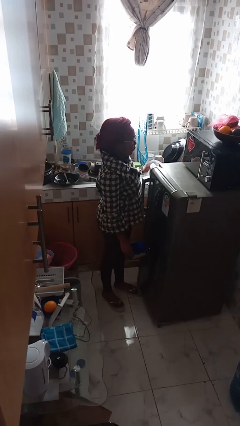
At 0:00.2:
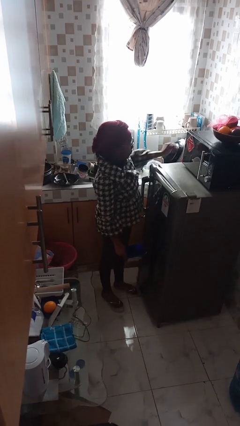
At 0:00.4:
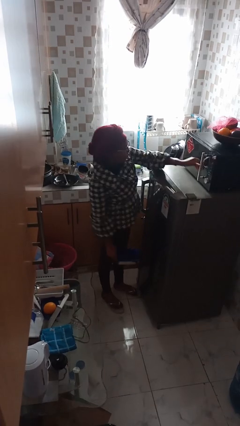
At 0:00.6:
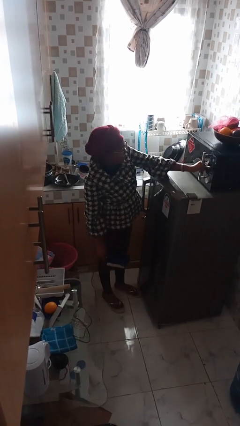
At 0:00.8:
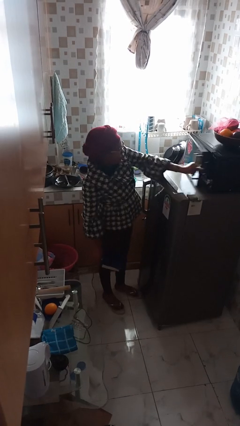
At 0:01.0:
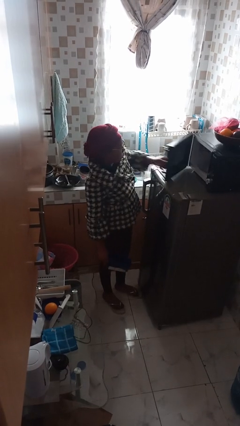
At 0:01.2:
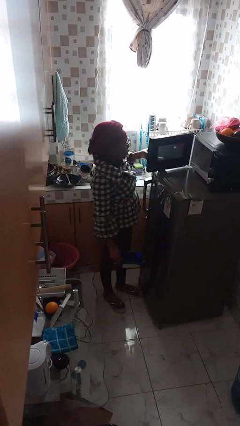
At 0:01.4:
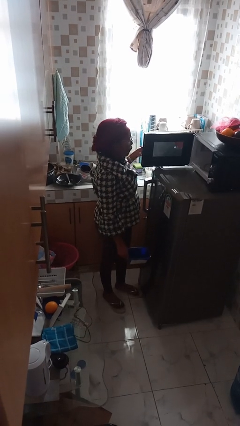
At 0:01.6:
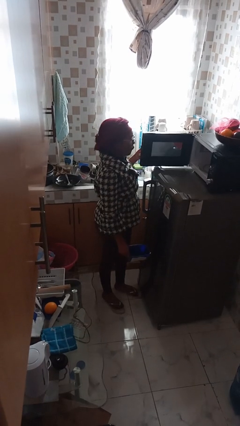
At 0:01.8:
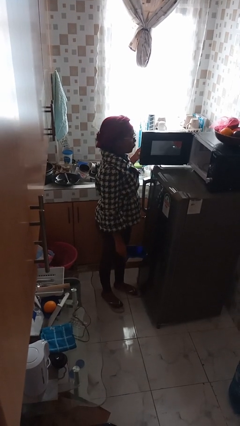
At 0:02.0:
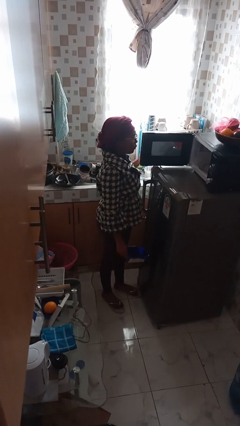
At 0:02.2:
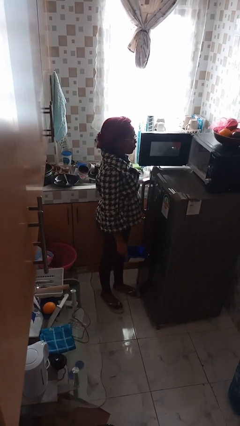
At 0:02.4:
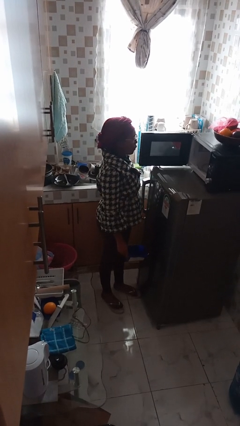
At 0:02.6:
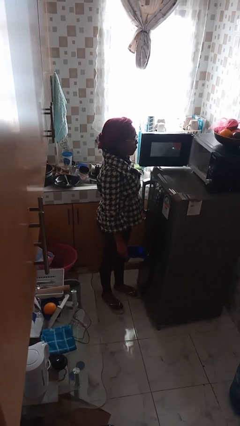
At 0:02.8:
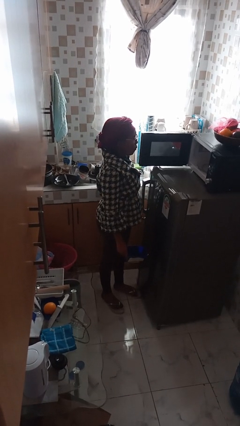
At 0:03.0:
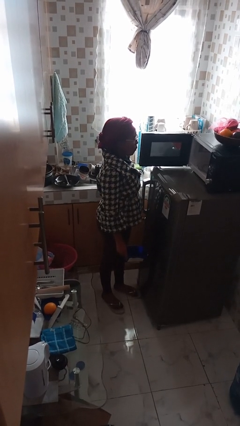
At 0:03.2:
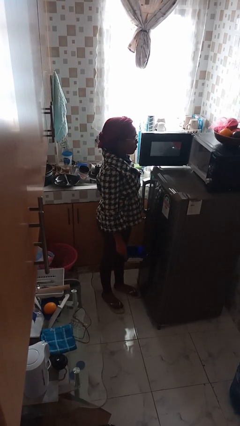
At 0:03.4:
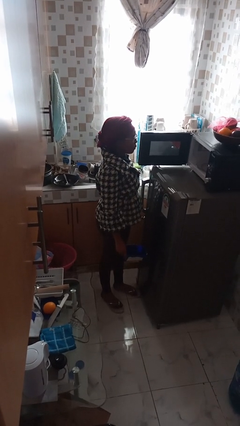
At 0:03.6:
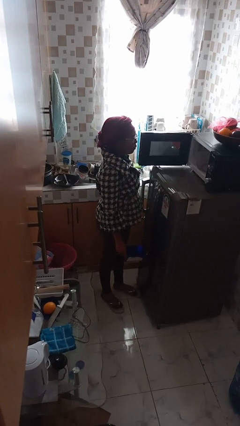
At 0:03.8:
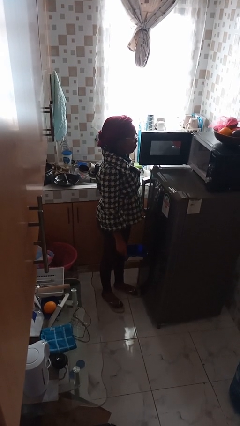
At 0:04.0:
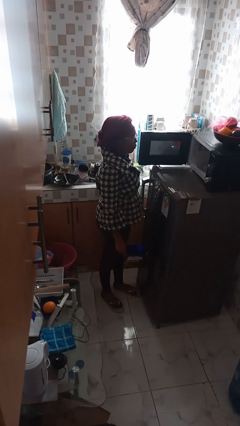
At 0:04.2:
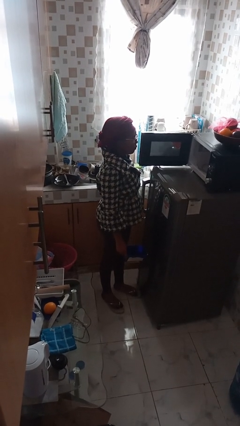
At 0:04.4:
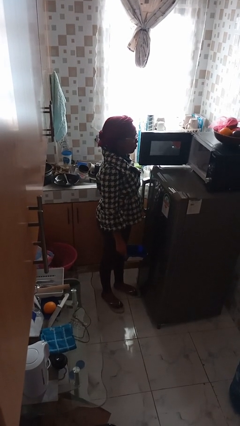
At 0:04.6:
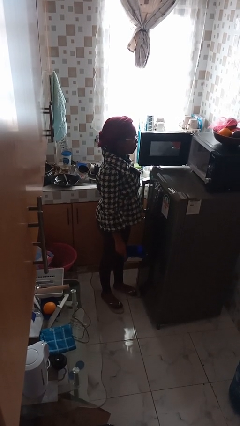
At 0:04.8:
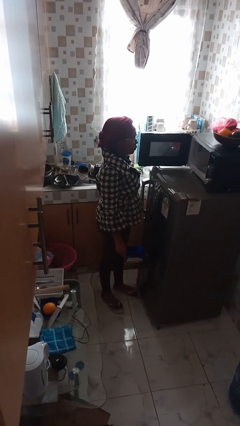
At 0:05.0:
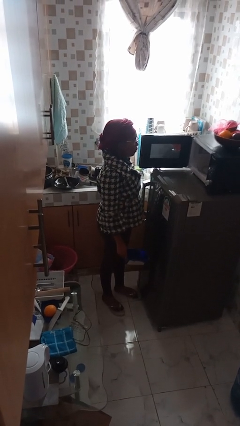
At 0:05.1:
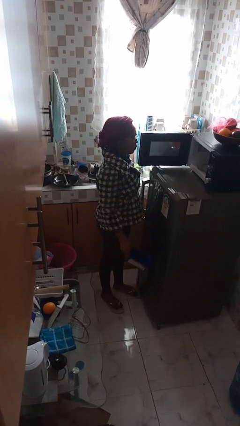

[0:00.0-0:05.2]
person opens microwave

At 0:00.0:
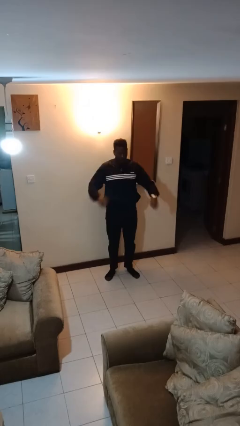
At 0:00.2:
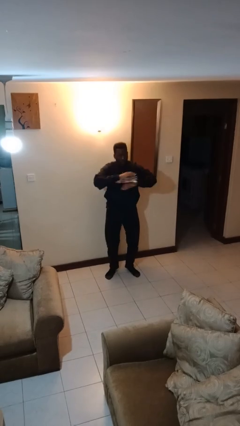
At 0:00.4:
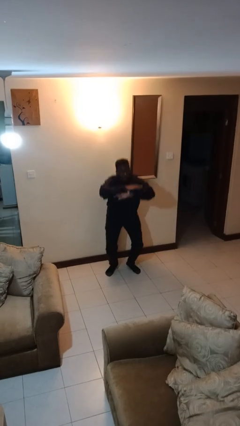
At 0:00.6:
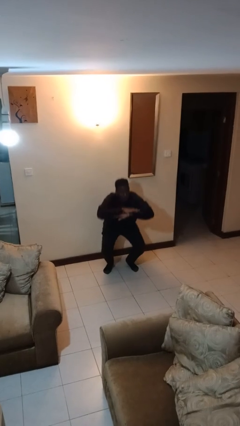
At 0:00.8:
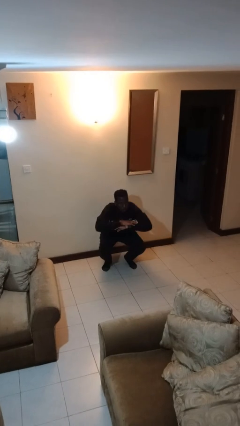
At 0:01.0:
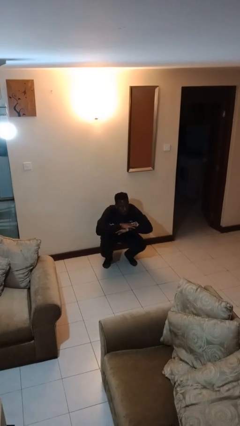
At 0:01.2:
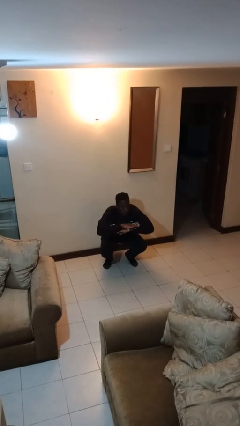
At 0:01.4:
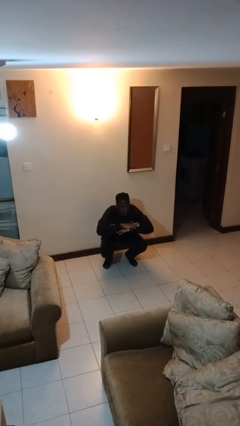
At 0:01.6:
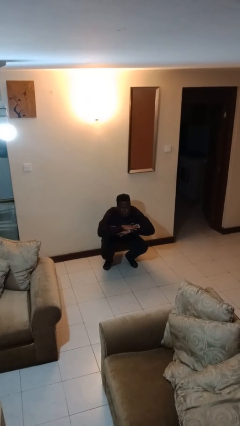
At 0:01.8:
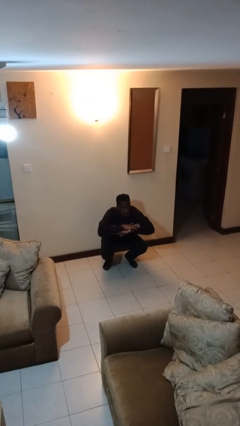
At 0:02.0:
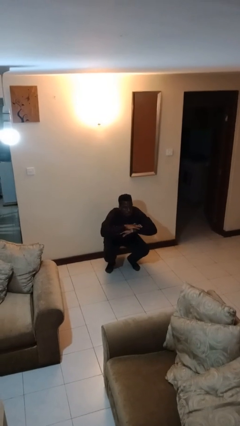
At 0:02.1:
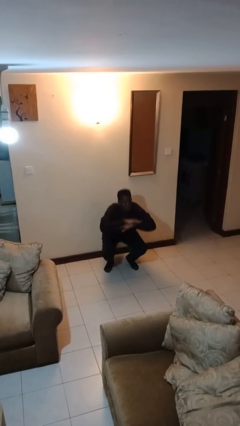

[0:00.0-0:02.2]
person squats

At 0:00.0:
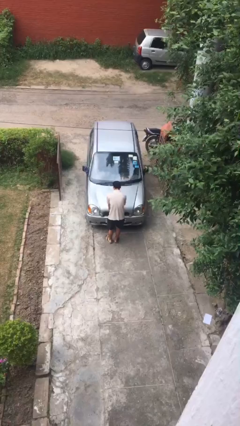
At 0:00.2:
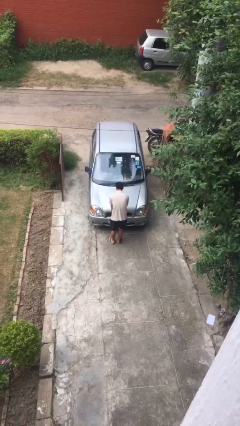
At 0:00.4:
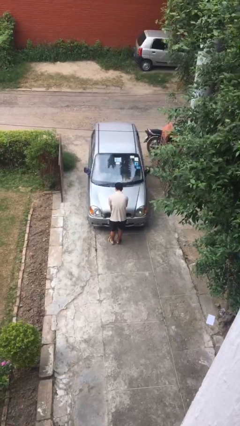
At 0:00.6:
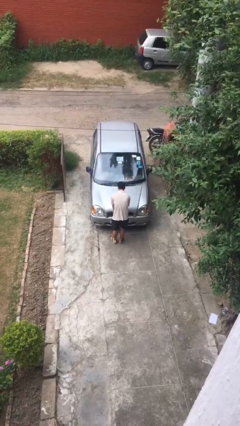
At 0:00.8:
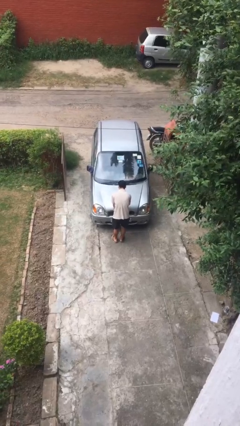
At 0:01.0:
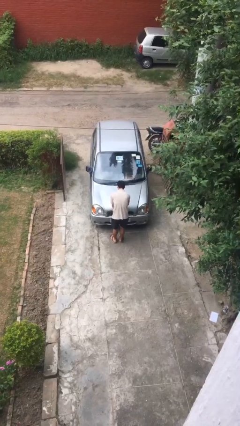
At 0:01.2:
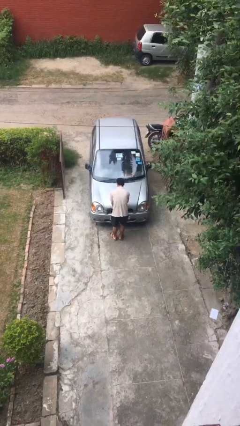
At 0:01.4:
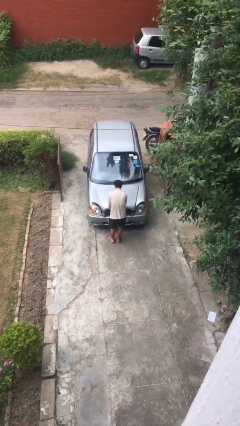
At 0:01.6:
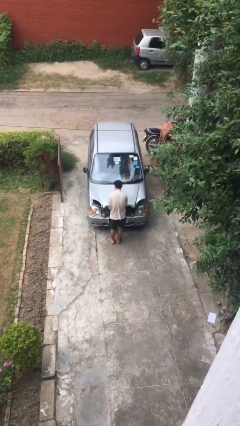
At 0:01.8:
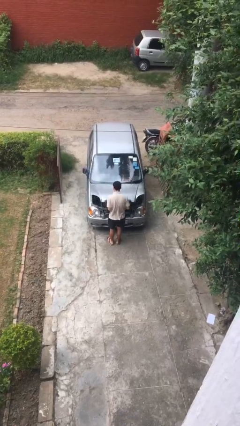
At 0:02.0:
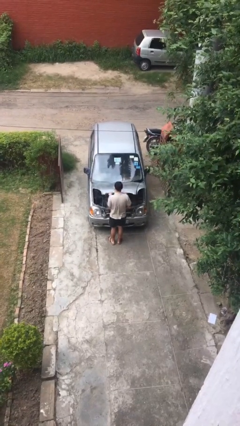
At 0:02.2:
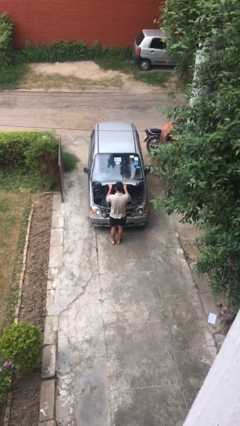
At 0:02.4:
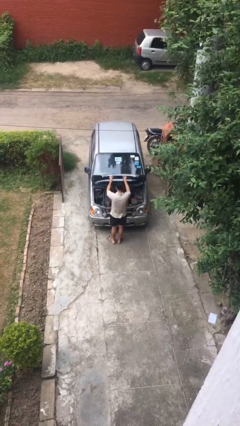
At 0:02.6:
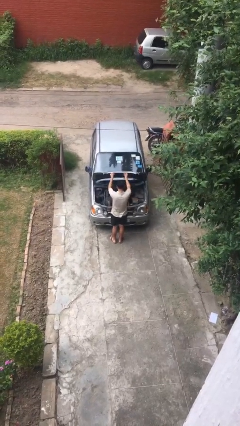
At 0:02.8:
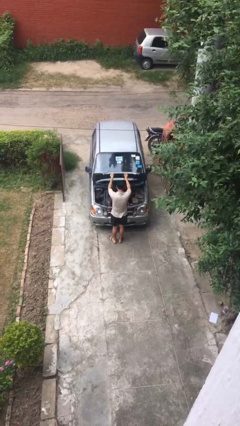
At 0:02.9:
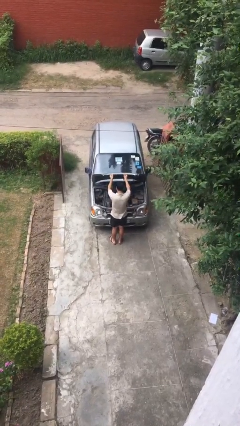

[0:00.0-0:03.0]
person opens car hood

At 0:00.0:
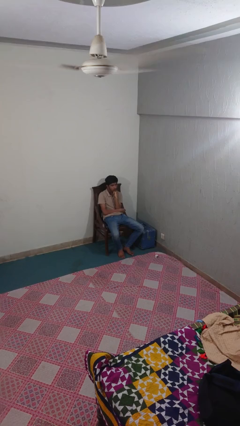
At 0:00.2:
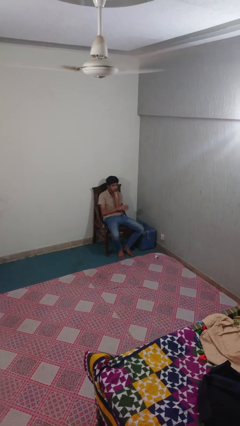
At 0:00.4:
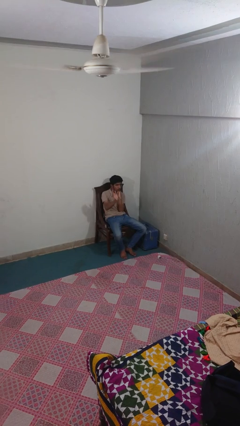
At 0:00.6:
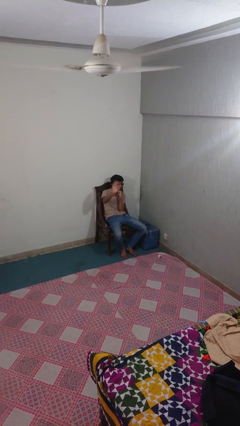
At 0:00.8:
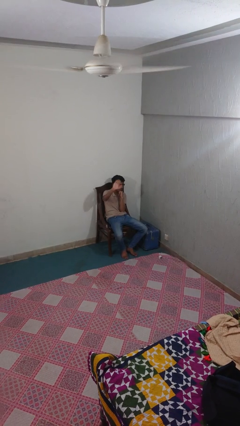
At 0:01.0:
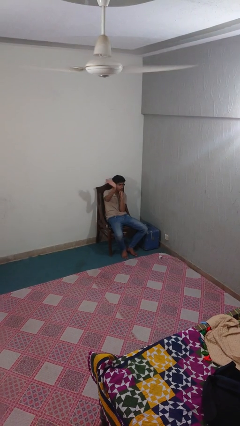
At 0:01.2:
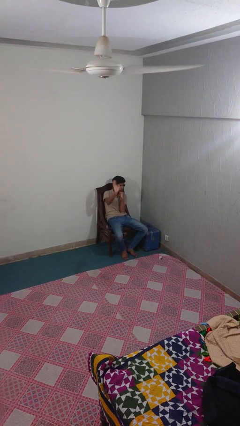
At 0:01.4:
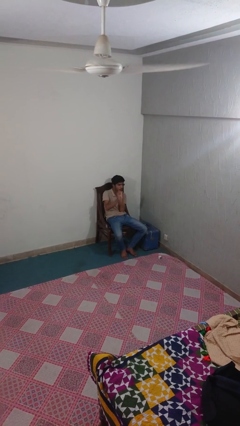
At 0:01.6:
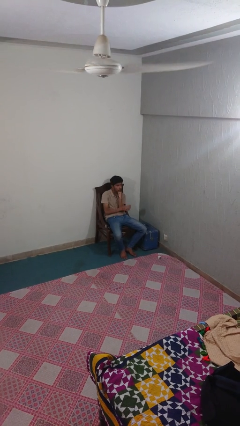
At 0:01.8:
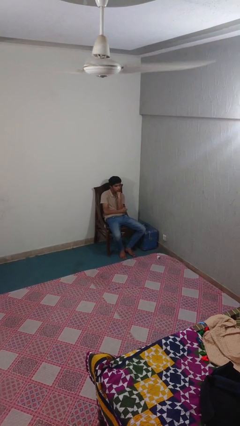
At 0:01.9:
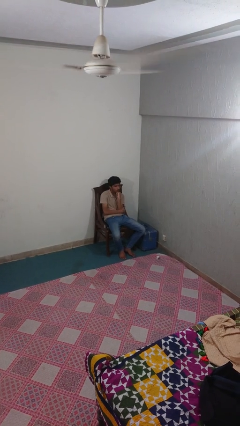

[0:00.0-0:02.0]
person waves at person

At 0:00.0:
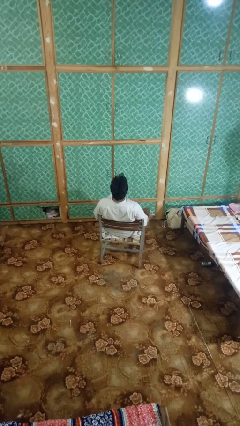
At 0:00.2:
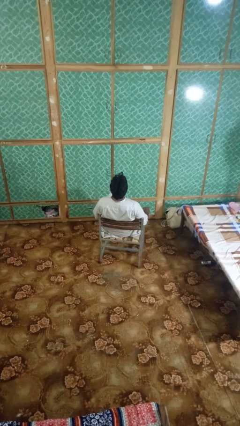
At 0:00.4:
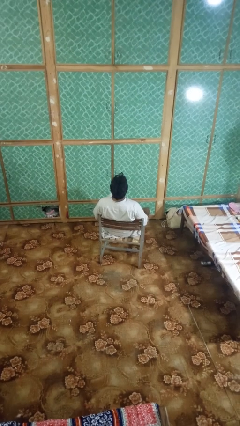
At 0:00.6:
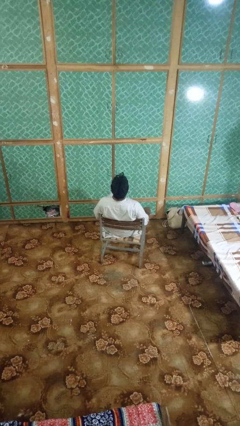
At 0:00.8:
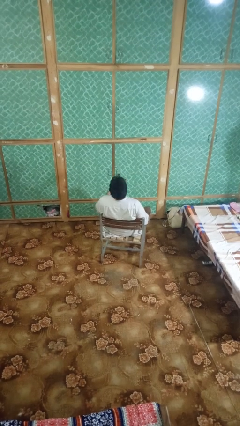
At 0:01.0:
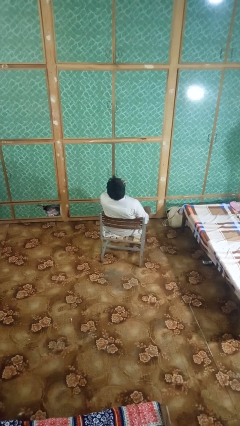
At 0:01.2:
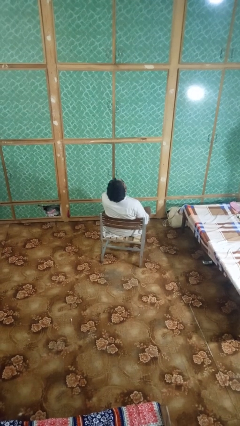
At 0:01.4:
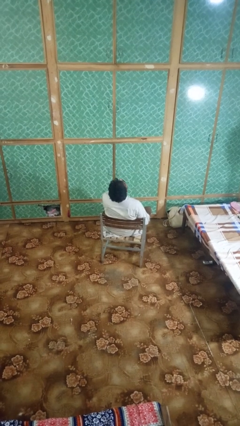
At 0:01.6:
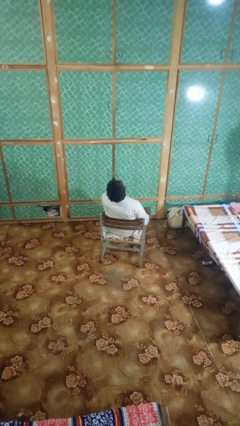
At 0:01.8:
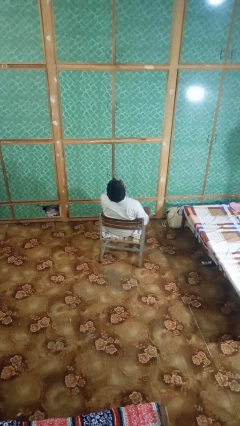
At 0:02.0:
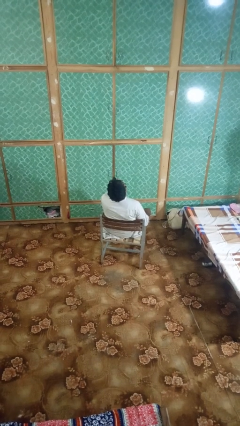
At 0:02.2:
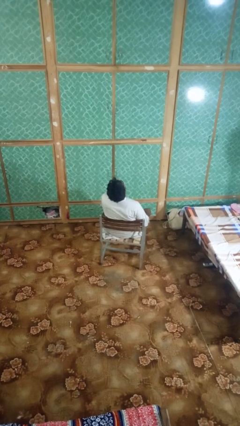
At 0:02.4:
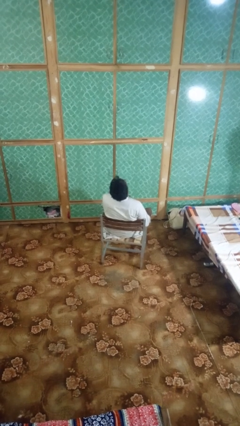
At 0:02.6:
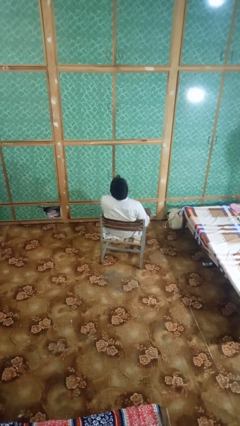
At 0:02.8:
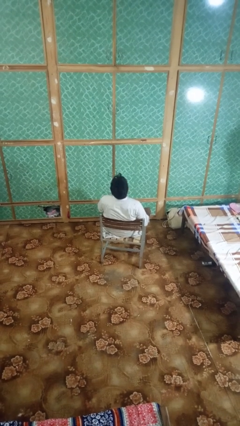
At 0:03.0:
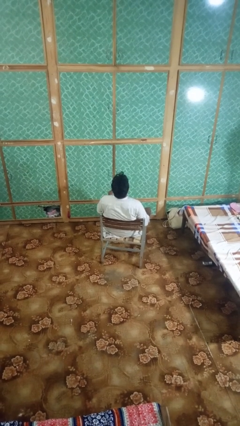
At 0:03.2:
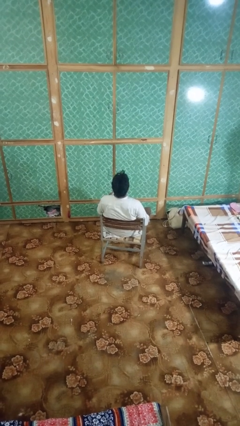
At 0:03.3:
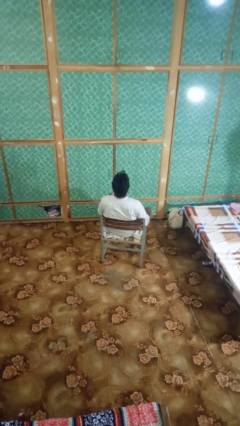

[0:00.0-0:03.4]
person rubs neck

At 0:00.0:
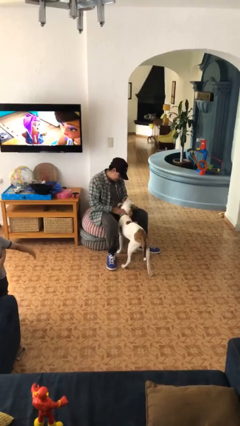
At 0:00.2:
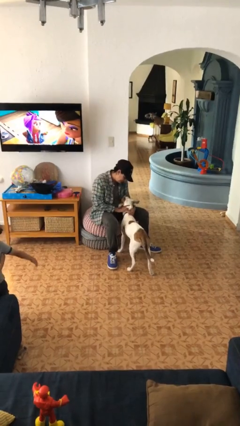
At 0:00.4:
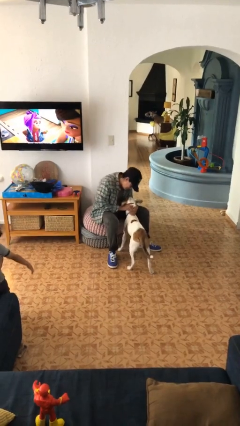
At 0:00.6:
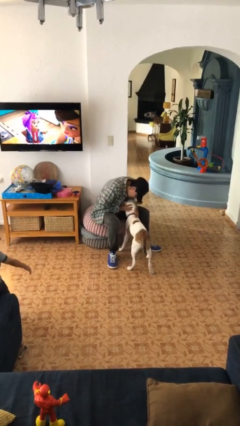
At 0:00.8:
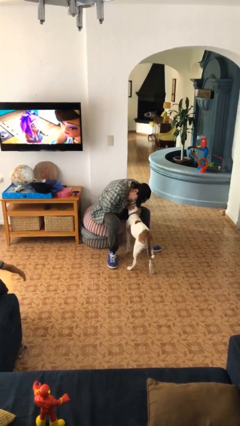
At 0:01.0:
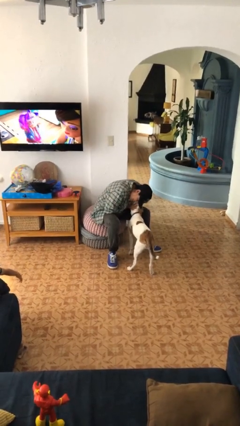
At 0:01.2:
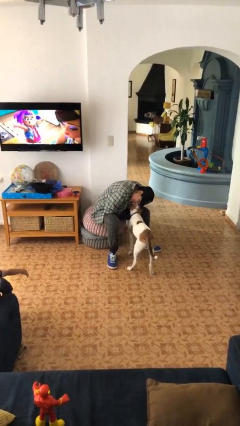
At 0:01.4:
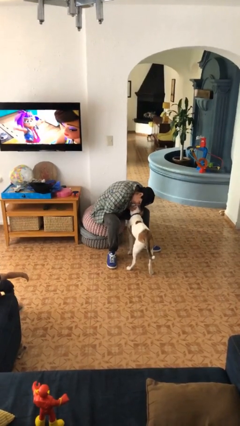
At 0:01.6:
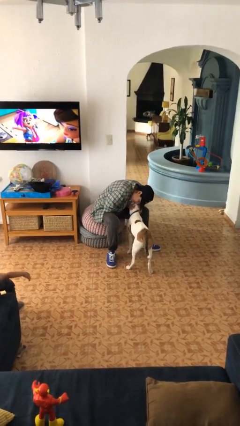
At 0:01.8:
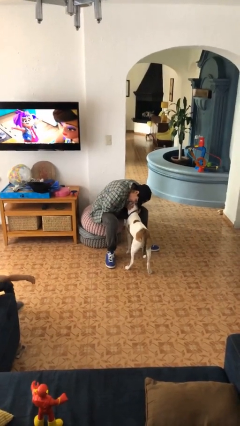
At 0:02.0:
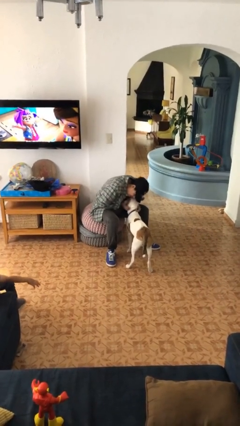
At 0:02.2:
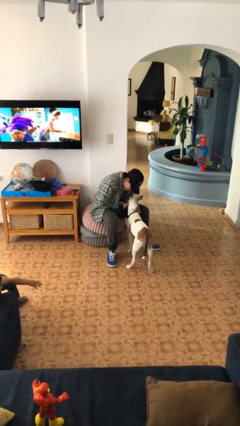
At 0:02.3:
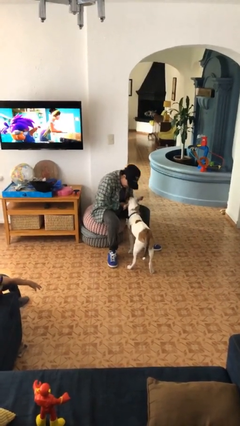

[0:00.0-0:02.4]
person hugs cat
